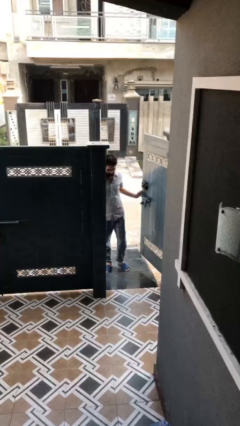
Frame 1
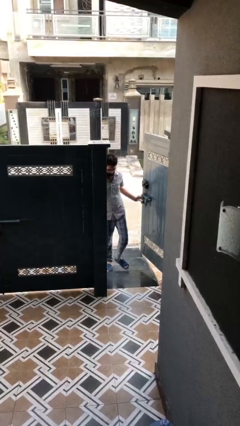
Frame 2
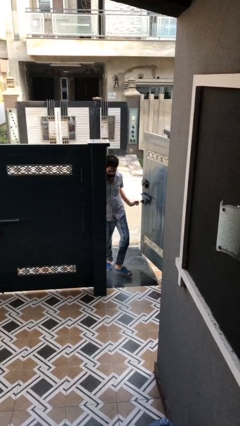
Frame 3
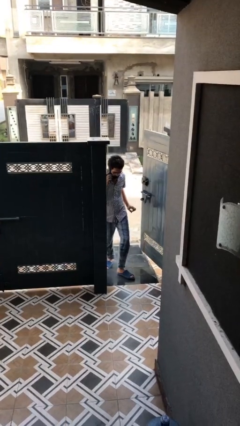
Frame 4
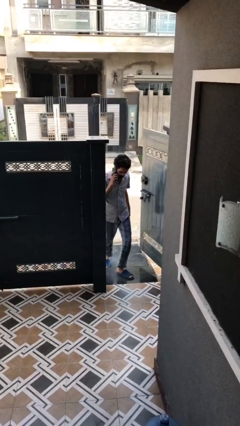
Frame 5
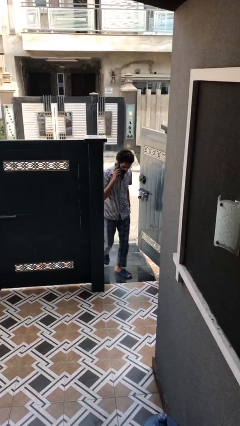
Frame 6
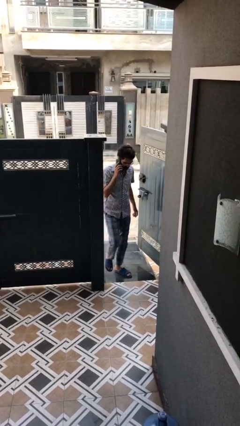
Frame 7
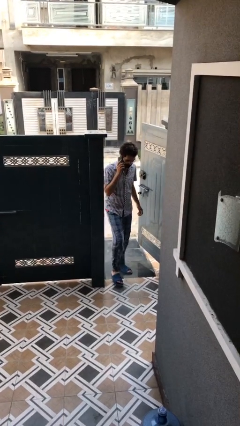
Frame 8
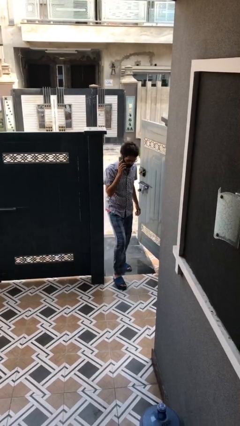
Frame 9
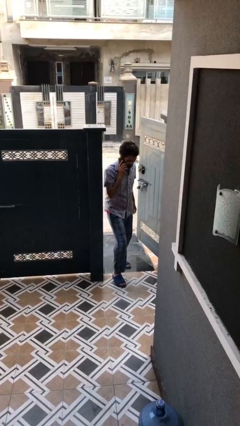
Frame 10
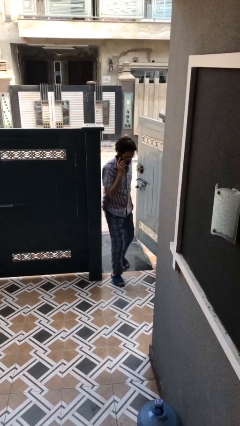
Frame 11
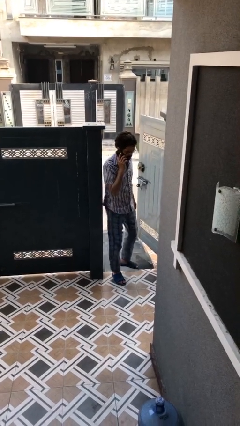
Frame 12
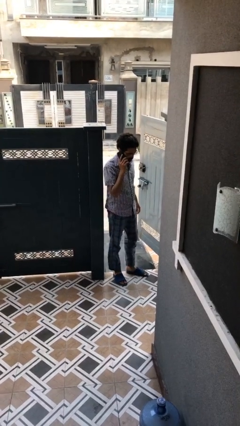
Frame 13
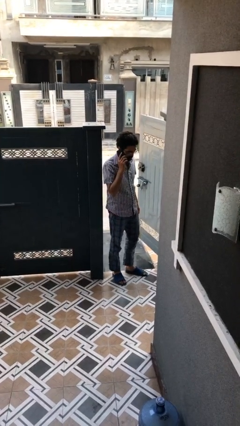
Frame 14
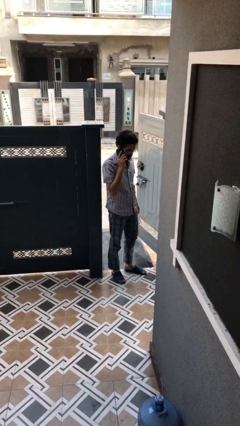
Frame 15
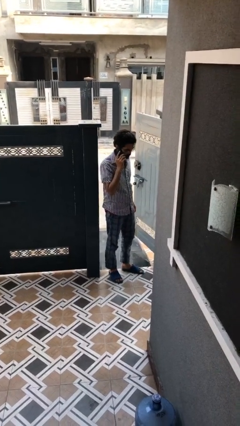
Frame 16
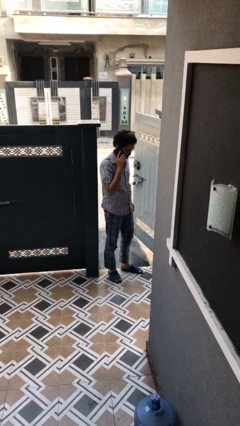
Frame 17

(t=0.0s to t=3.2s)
person enters scene through structure

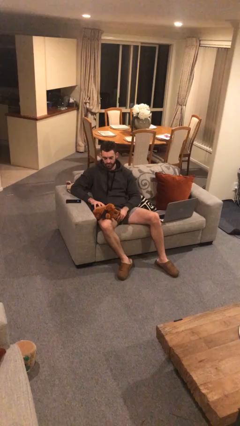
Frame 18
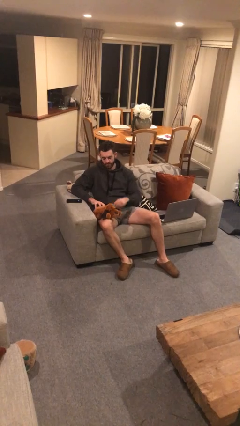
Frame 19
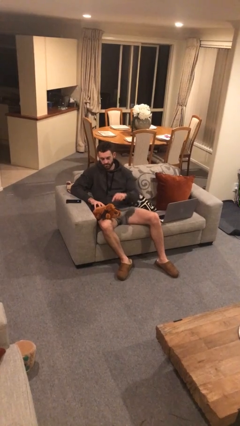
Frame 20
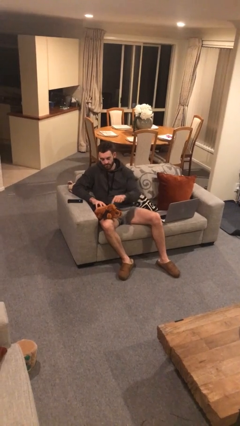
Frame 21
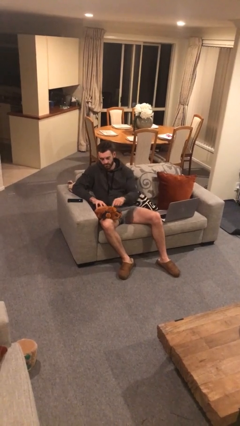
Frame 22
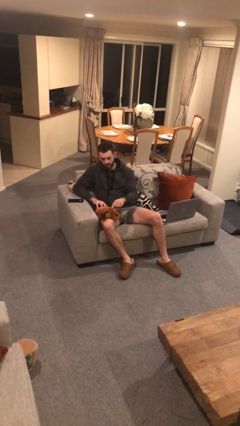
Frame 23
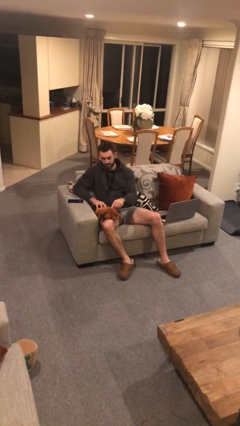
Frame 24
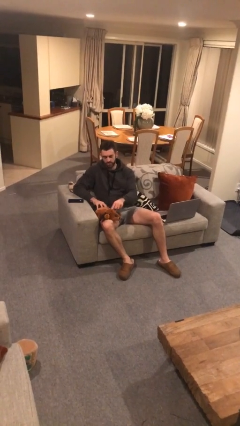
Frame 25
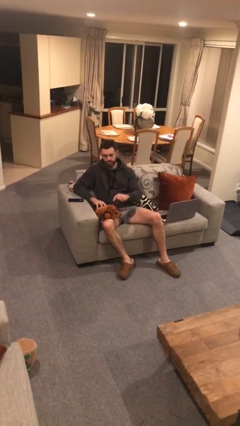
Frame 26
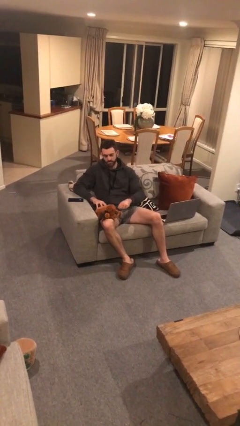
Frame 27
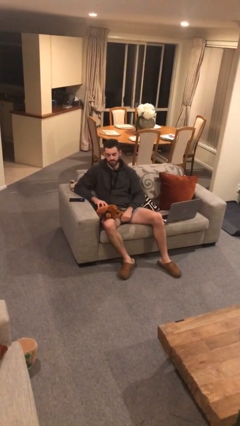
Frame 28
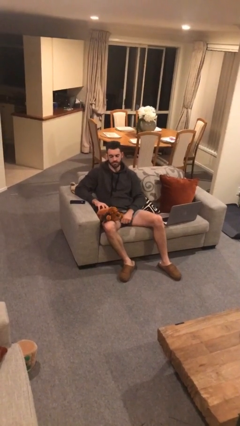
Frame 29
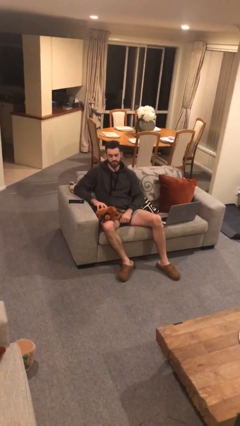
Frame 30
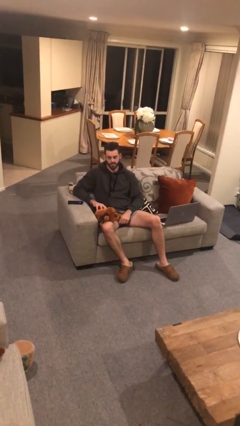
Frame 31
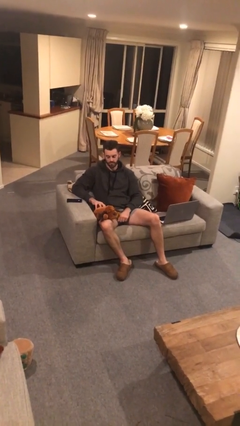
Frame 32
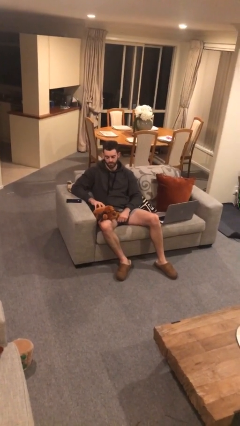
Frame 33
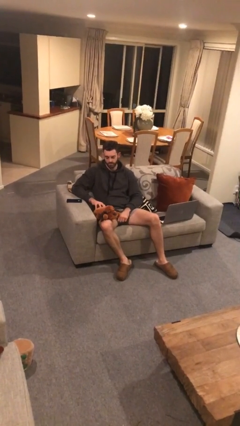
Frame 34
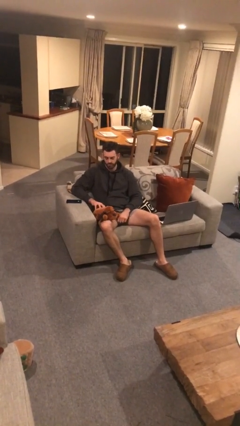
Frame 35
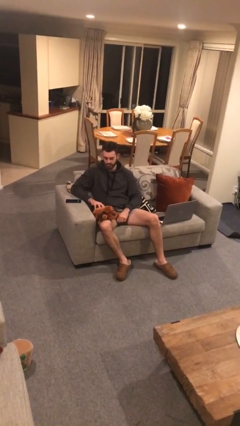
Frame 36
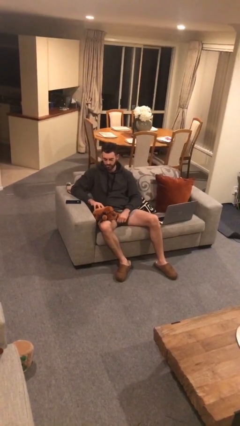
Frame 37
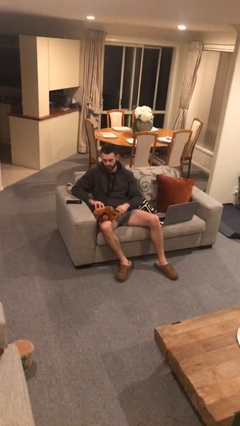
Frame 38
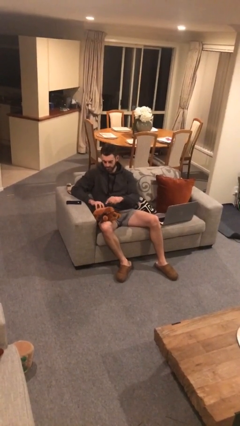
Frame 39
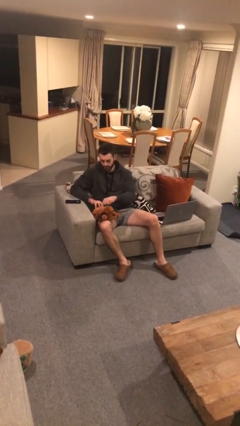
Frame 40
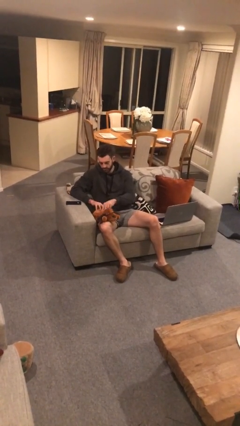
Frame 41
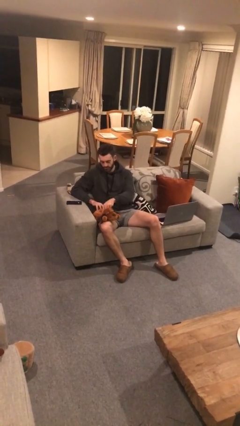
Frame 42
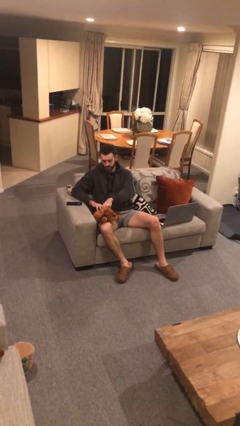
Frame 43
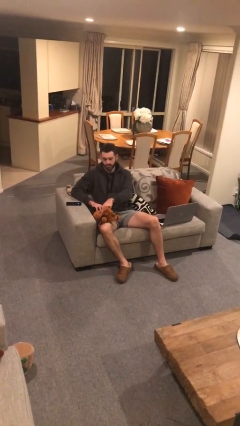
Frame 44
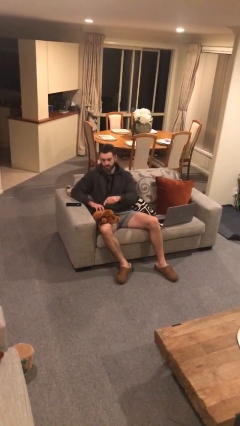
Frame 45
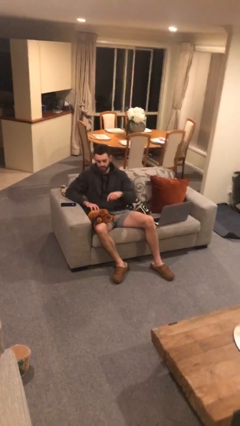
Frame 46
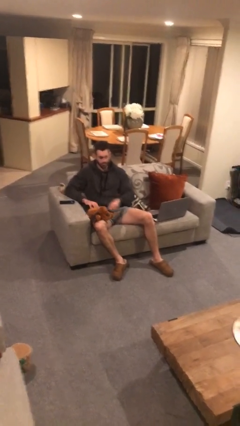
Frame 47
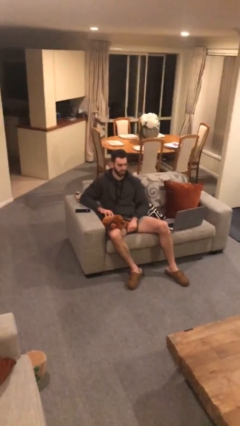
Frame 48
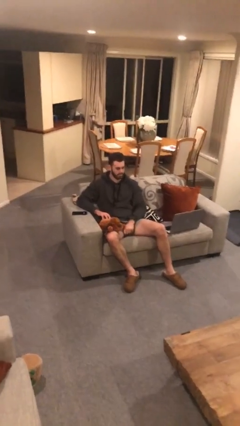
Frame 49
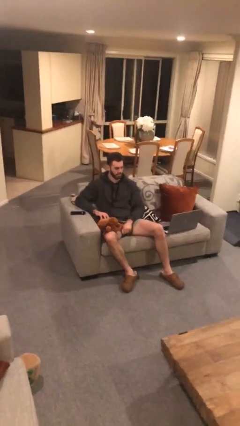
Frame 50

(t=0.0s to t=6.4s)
person taps object with finger

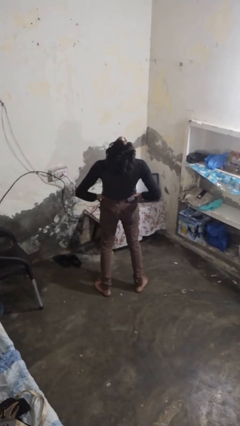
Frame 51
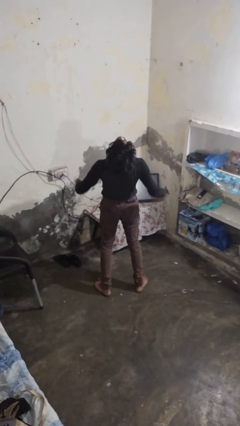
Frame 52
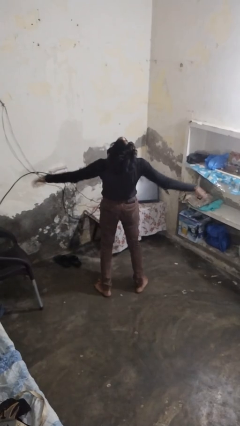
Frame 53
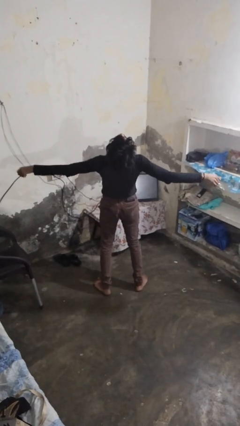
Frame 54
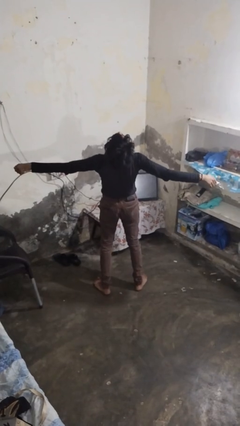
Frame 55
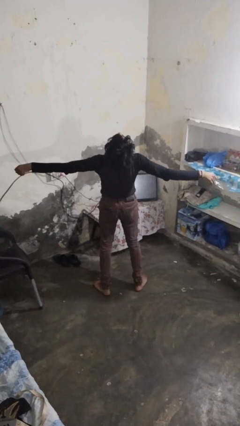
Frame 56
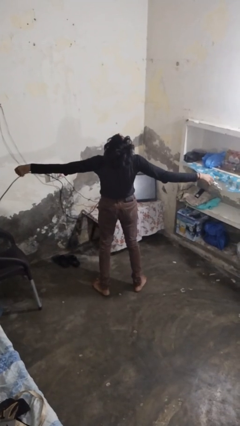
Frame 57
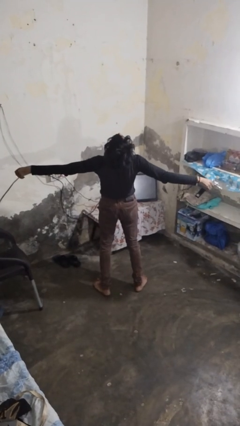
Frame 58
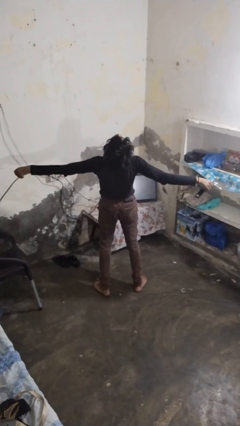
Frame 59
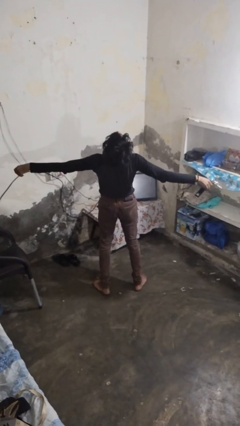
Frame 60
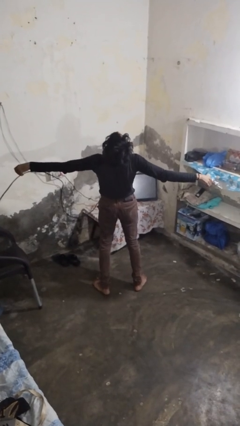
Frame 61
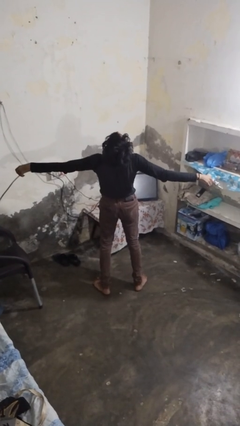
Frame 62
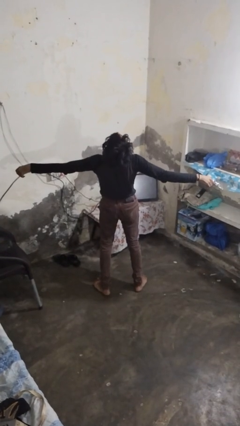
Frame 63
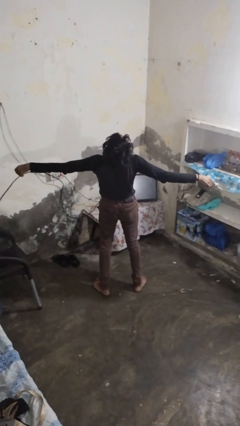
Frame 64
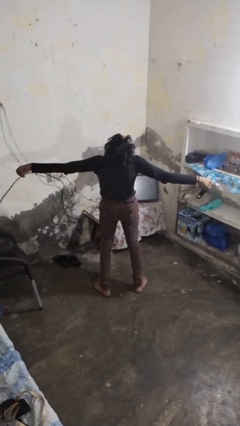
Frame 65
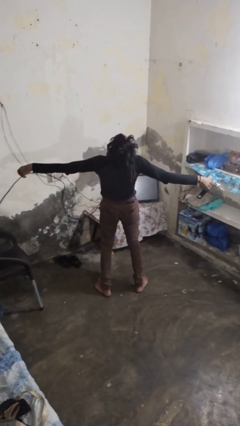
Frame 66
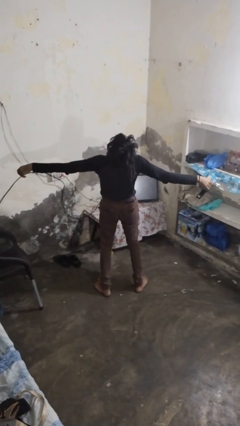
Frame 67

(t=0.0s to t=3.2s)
person stretches arms to side

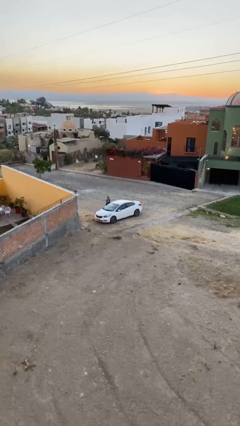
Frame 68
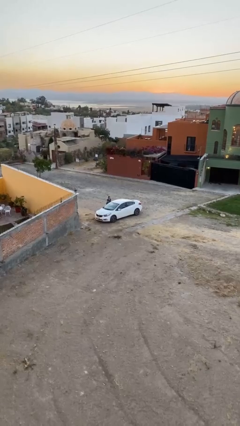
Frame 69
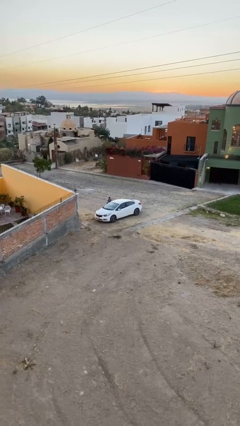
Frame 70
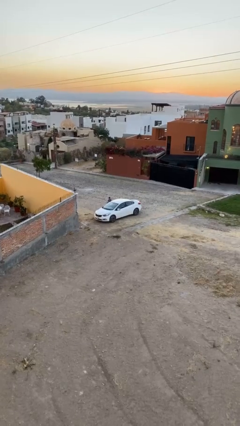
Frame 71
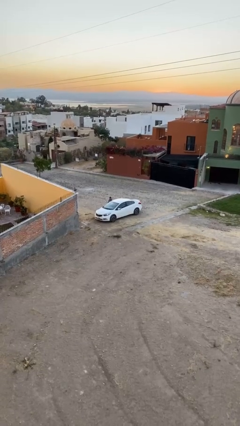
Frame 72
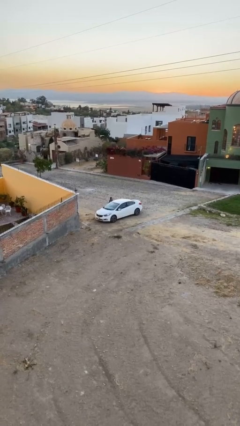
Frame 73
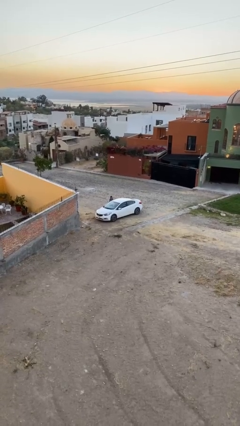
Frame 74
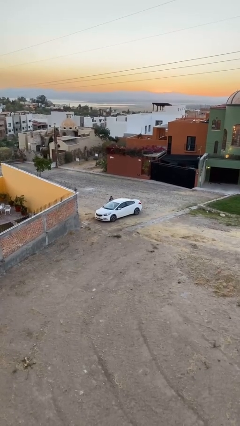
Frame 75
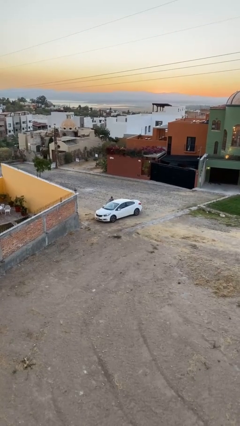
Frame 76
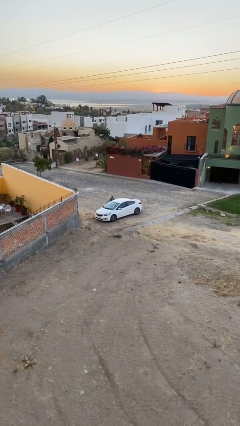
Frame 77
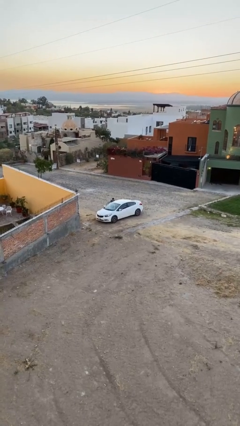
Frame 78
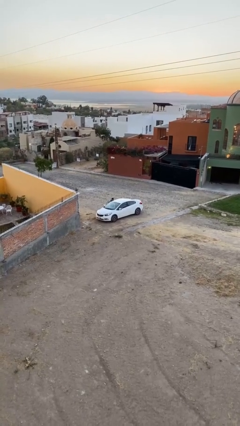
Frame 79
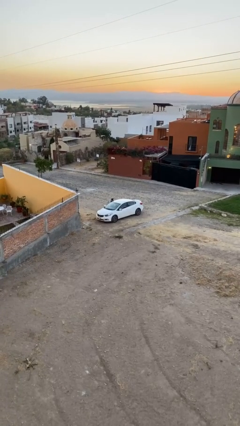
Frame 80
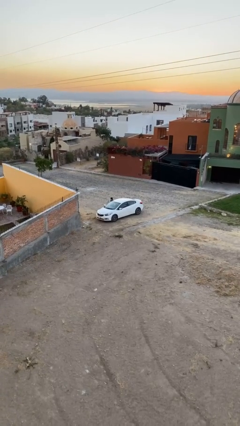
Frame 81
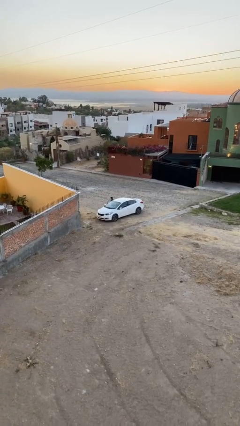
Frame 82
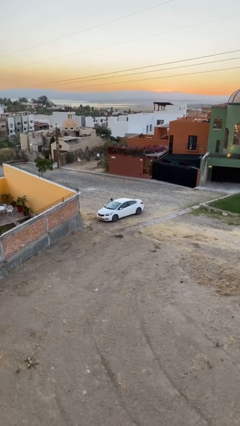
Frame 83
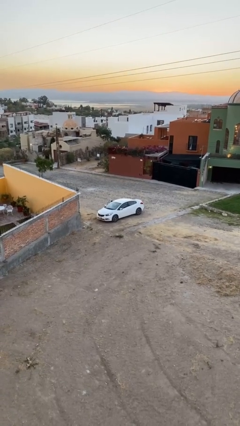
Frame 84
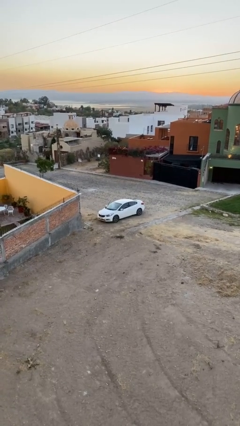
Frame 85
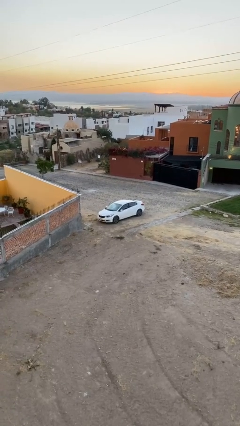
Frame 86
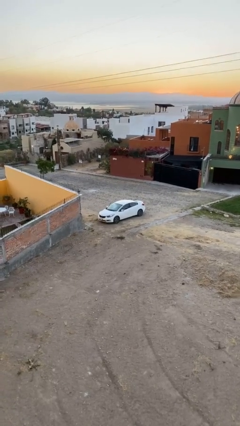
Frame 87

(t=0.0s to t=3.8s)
car picks up person

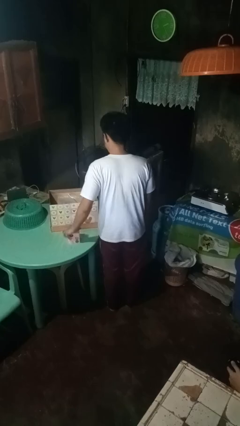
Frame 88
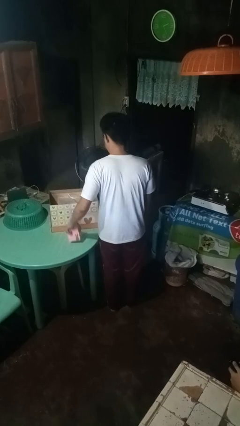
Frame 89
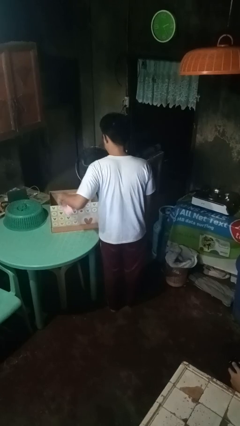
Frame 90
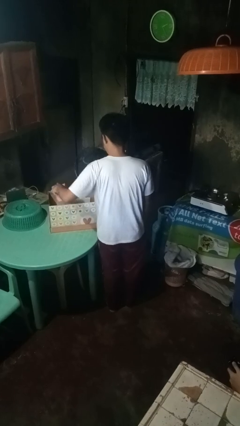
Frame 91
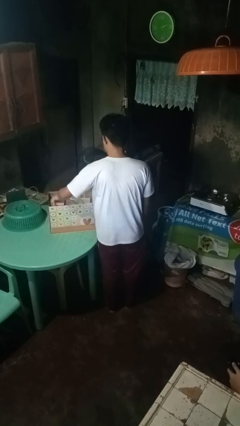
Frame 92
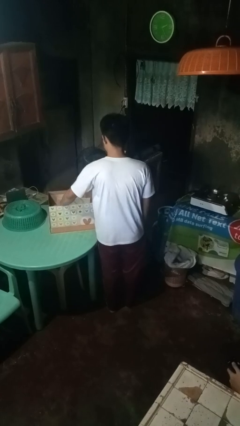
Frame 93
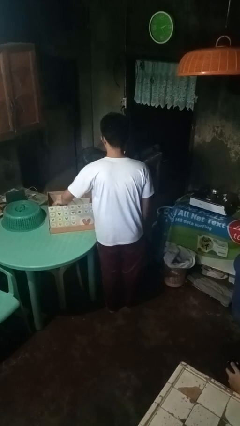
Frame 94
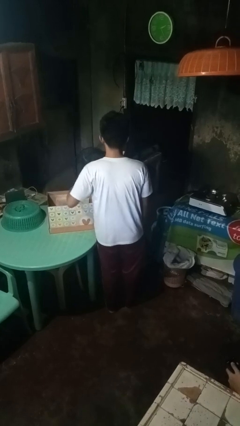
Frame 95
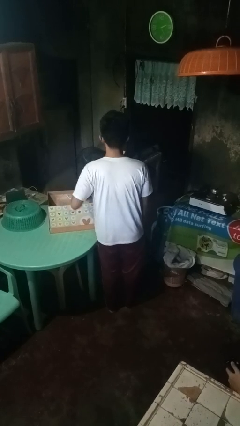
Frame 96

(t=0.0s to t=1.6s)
person puts object into box
